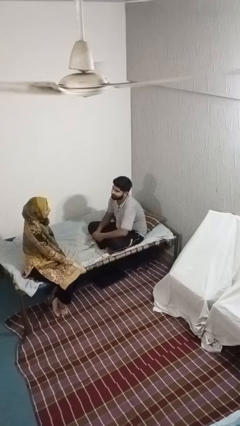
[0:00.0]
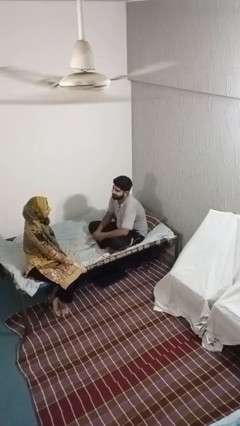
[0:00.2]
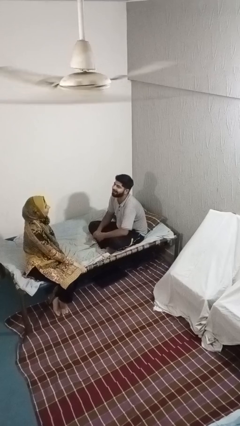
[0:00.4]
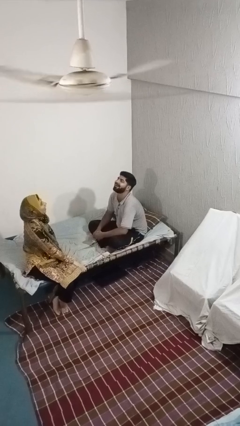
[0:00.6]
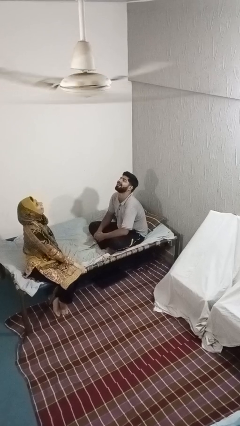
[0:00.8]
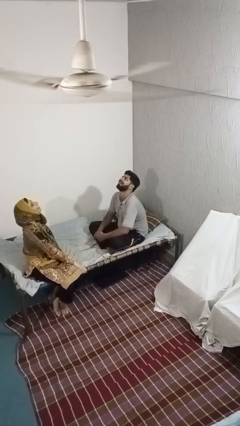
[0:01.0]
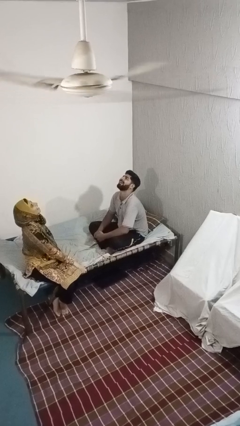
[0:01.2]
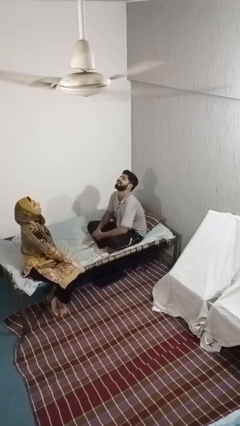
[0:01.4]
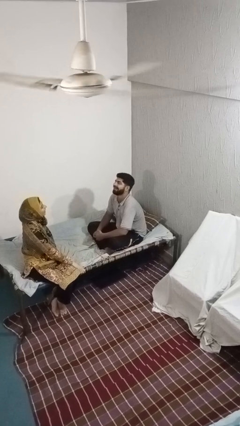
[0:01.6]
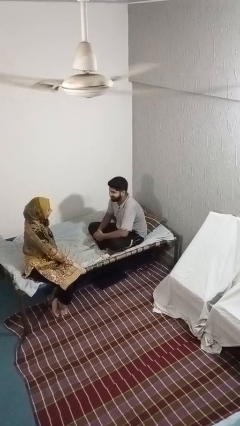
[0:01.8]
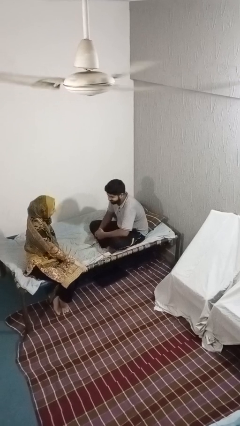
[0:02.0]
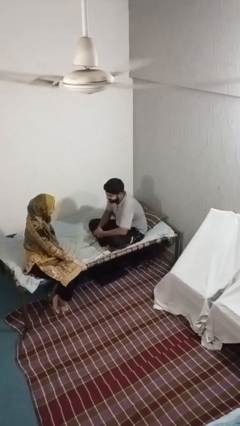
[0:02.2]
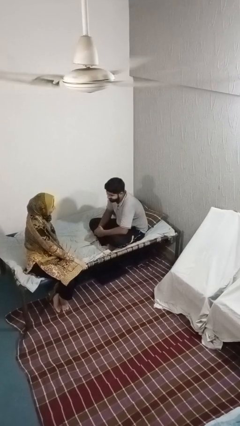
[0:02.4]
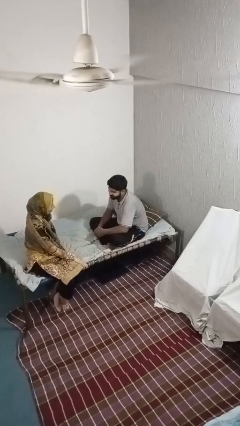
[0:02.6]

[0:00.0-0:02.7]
person laughs with person

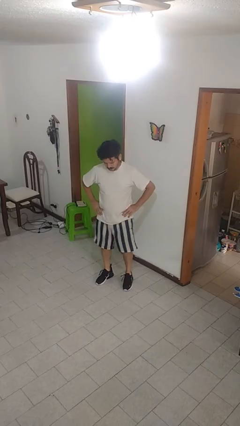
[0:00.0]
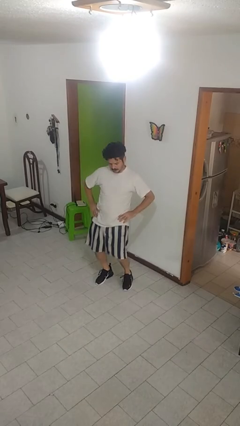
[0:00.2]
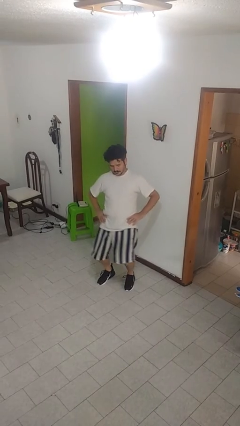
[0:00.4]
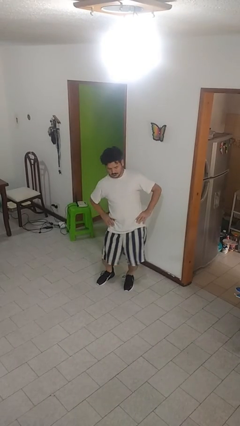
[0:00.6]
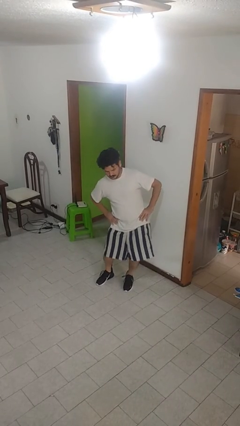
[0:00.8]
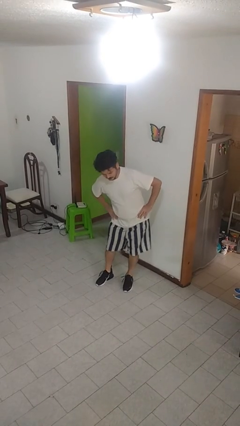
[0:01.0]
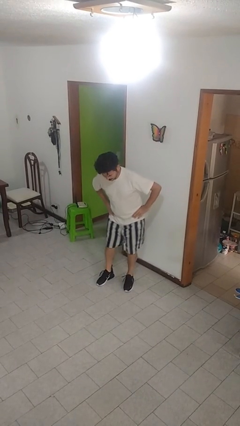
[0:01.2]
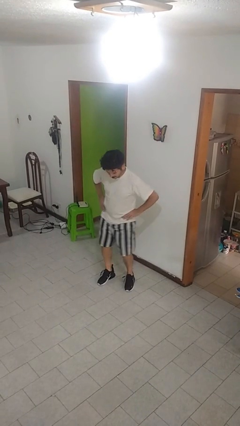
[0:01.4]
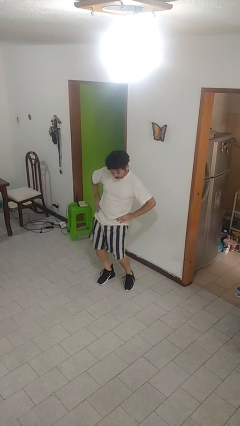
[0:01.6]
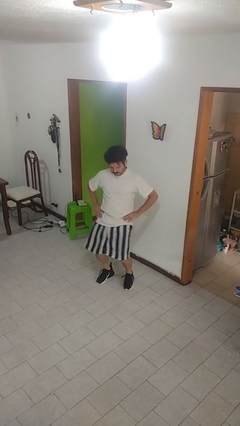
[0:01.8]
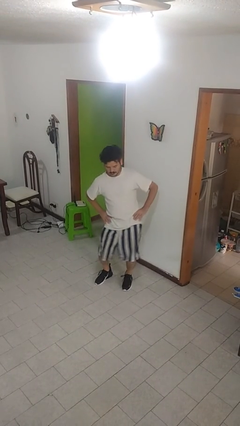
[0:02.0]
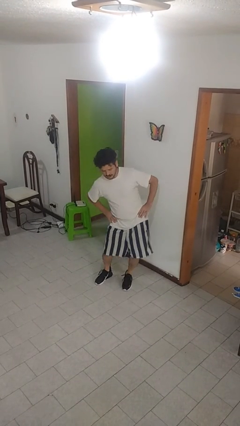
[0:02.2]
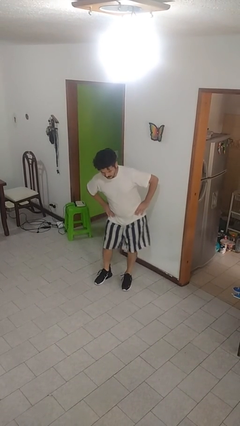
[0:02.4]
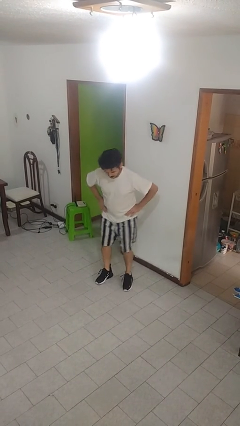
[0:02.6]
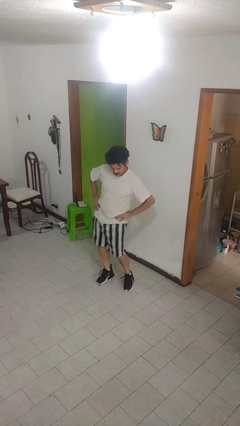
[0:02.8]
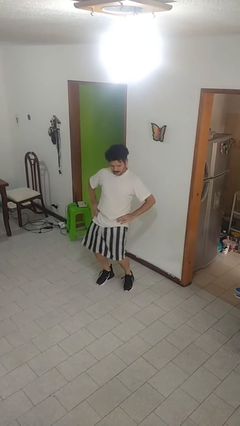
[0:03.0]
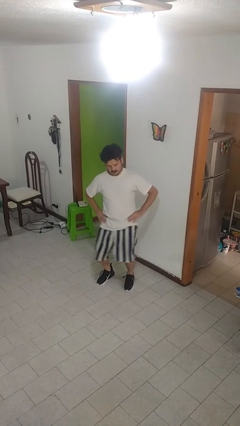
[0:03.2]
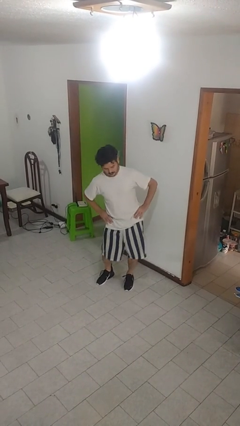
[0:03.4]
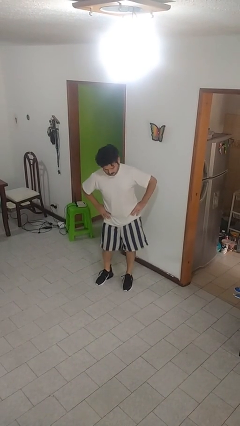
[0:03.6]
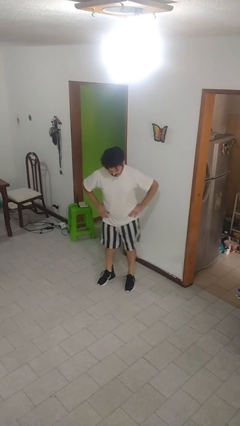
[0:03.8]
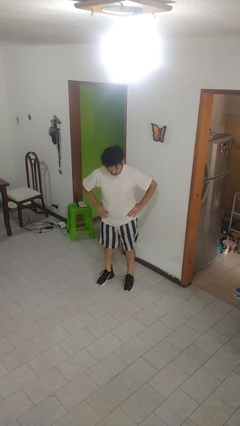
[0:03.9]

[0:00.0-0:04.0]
person wiggles hips

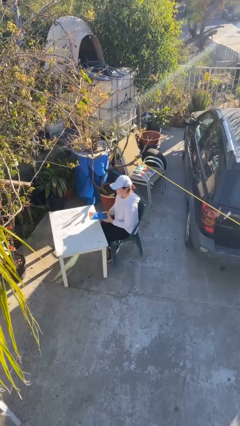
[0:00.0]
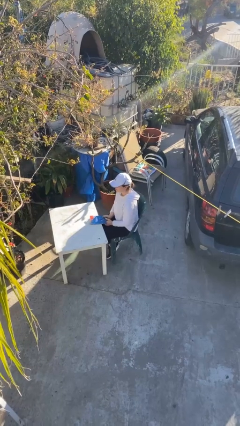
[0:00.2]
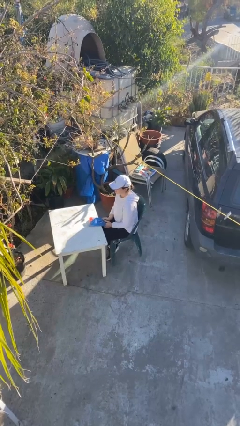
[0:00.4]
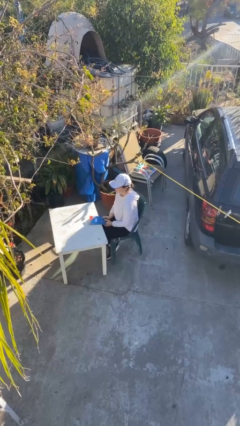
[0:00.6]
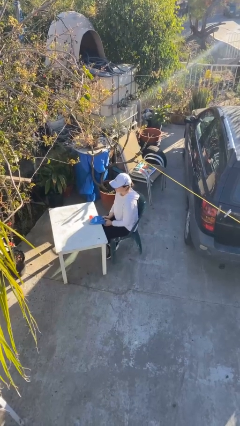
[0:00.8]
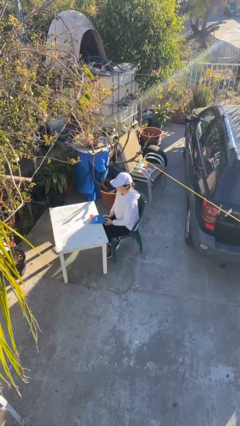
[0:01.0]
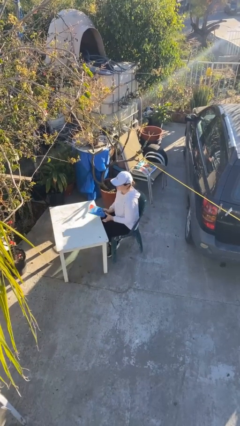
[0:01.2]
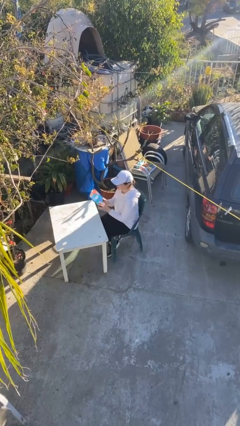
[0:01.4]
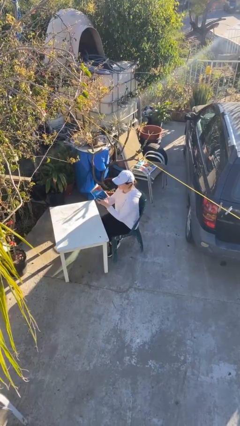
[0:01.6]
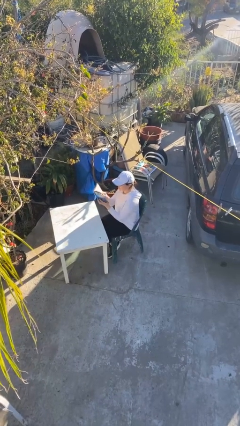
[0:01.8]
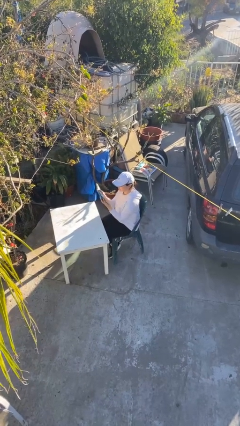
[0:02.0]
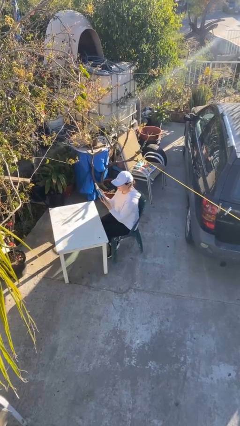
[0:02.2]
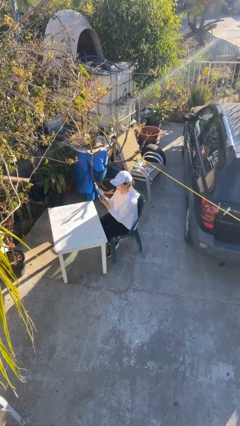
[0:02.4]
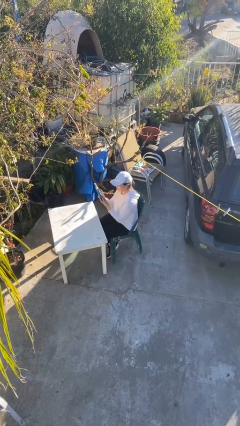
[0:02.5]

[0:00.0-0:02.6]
person reads document

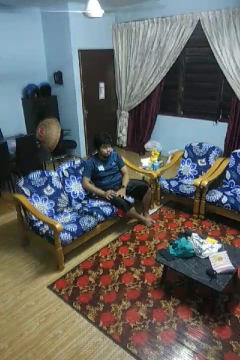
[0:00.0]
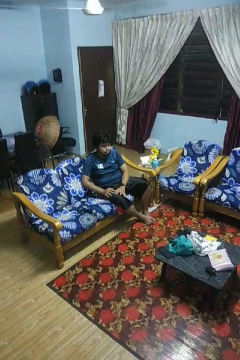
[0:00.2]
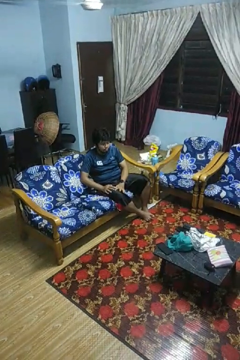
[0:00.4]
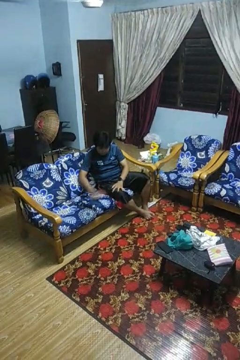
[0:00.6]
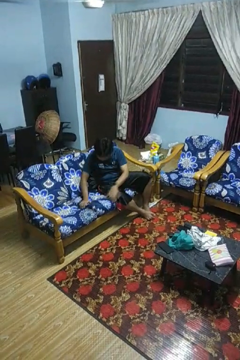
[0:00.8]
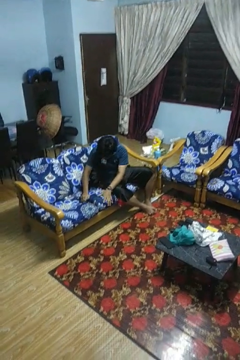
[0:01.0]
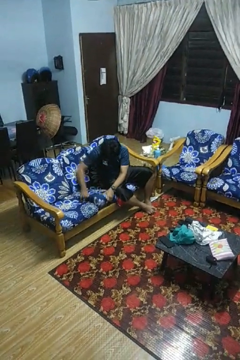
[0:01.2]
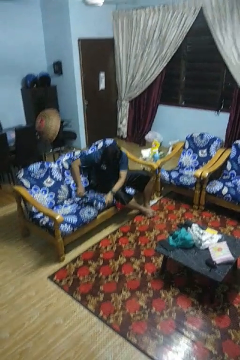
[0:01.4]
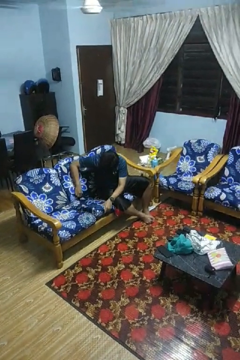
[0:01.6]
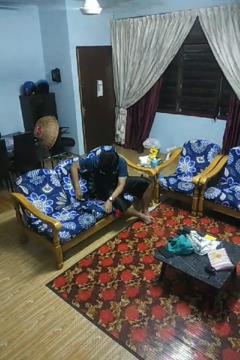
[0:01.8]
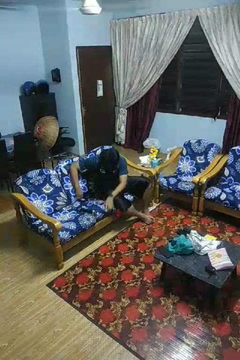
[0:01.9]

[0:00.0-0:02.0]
person searches in couch

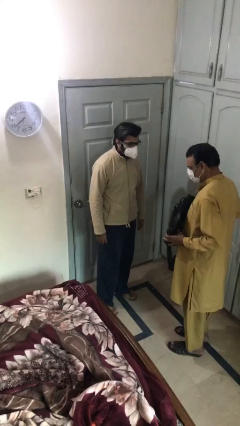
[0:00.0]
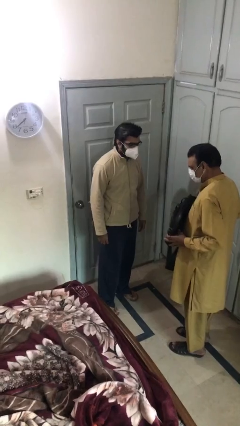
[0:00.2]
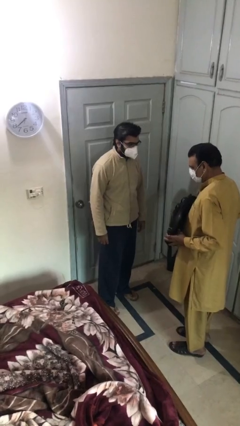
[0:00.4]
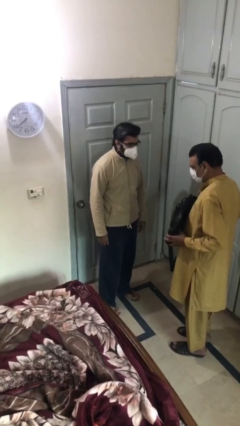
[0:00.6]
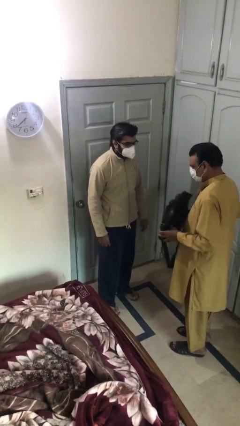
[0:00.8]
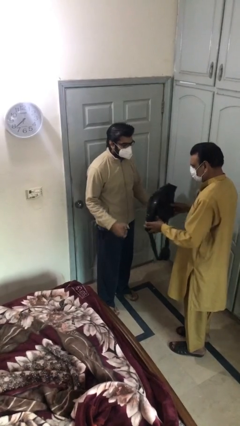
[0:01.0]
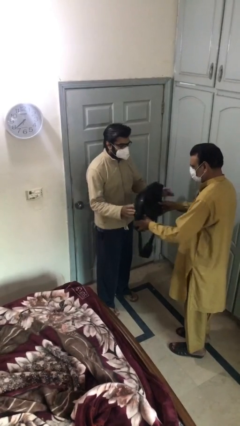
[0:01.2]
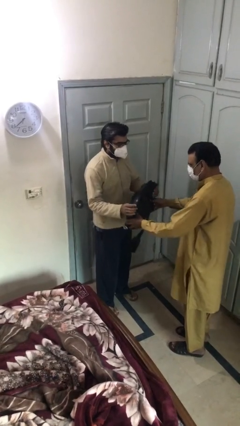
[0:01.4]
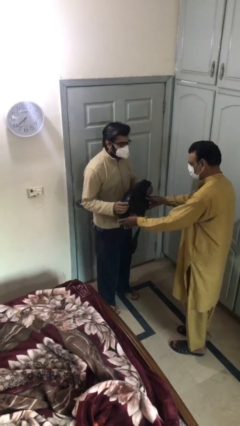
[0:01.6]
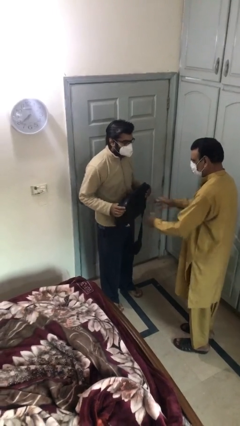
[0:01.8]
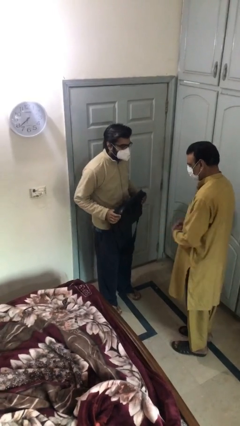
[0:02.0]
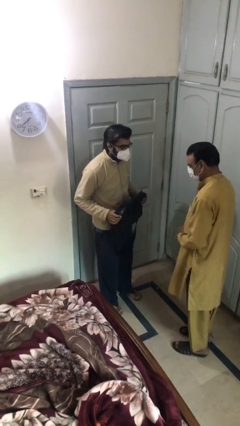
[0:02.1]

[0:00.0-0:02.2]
person transfers object to person

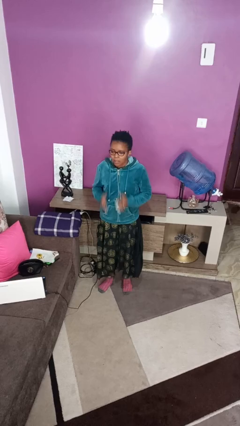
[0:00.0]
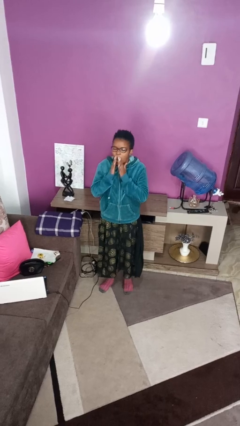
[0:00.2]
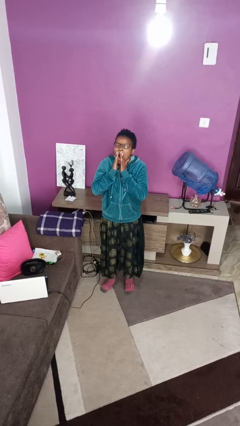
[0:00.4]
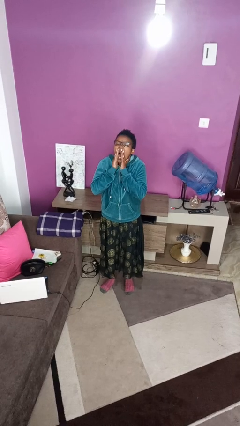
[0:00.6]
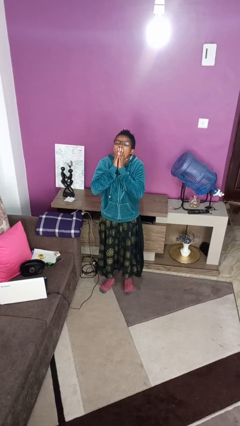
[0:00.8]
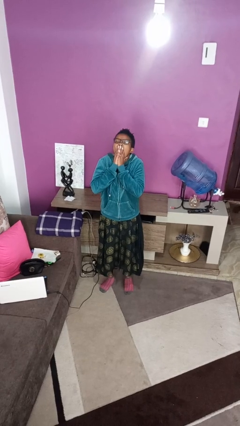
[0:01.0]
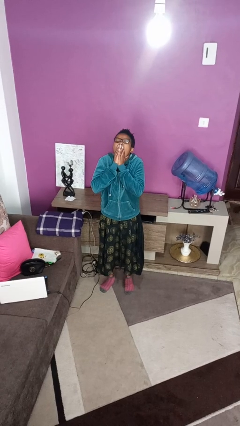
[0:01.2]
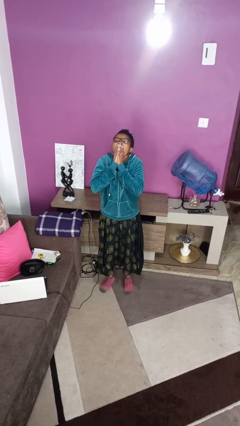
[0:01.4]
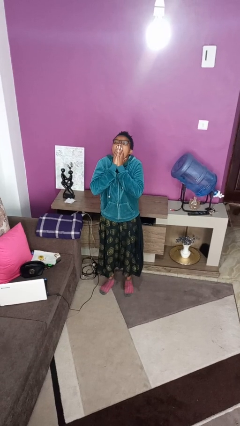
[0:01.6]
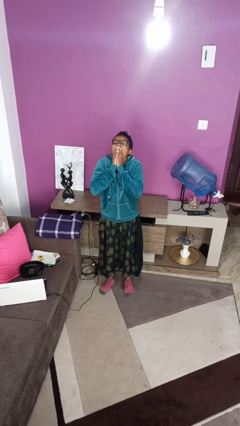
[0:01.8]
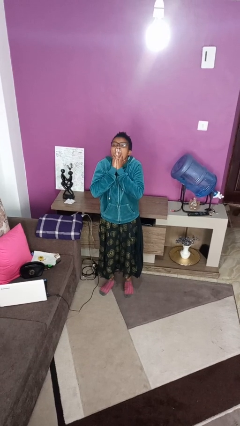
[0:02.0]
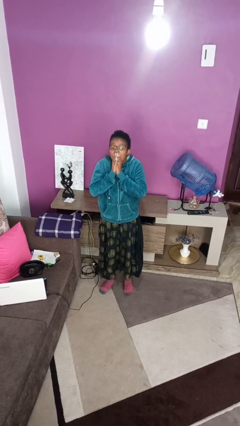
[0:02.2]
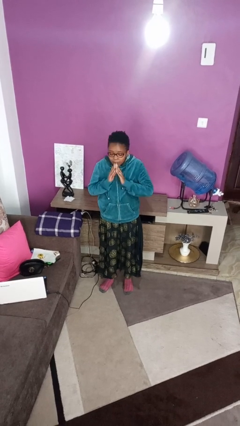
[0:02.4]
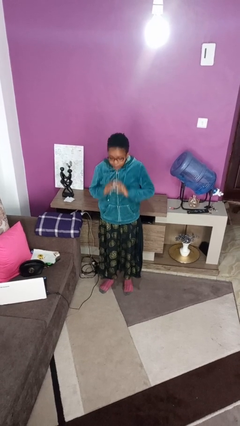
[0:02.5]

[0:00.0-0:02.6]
person yawns

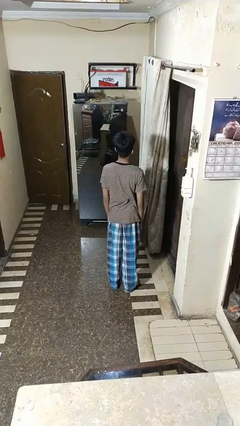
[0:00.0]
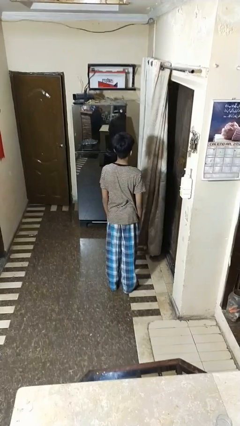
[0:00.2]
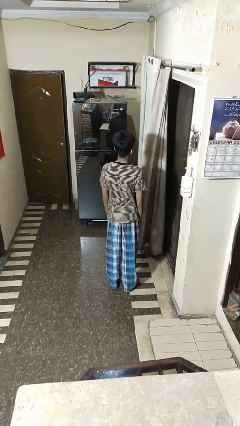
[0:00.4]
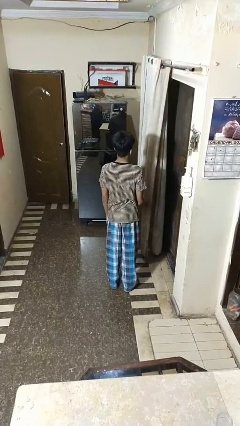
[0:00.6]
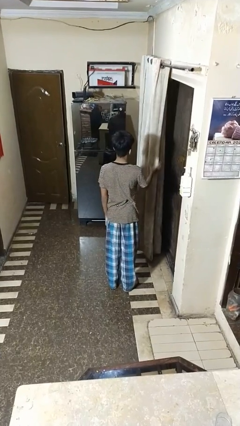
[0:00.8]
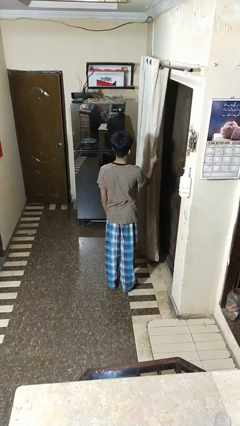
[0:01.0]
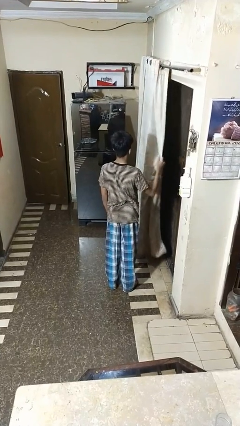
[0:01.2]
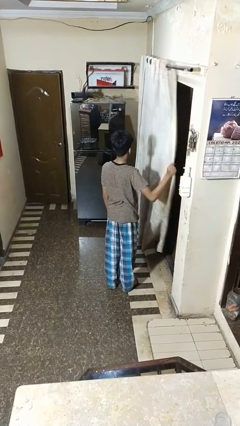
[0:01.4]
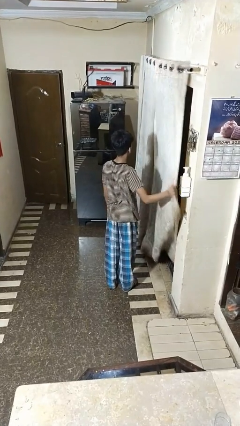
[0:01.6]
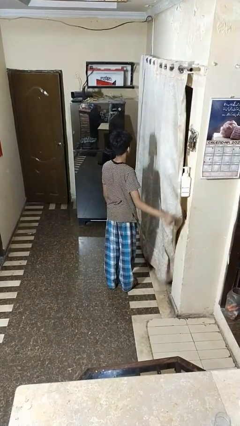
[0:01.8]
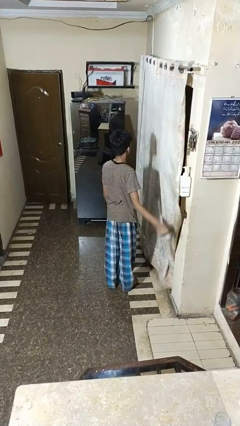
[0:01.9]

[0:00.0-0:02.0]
person closes curtains
